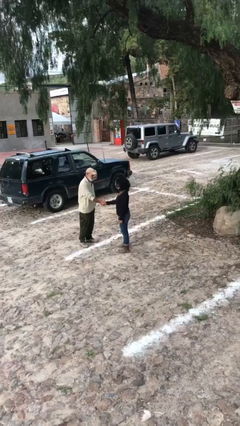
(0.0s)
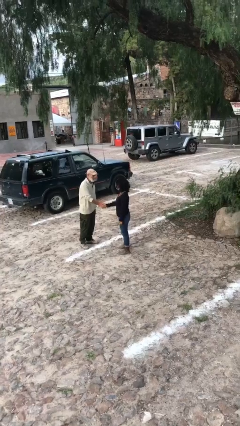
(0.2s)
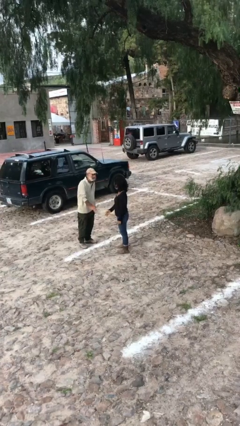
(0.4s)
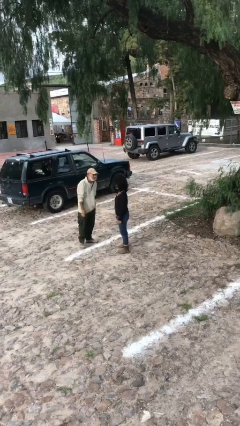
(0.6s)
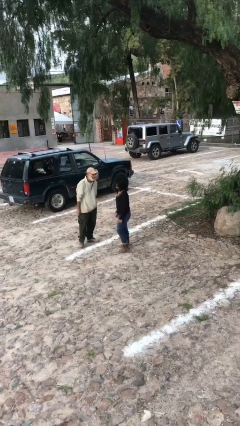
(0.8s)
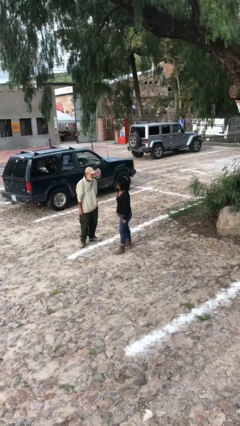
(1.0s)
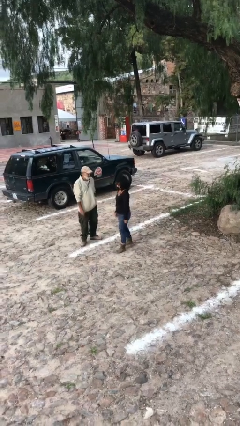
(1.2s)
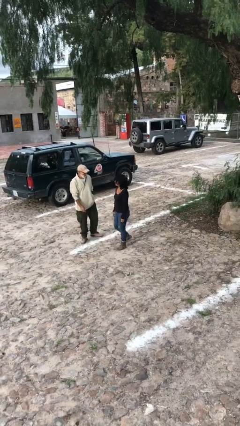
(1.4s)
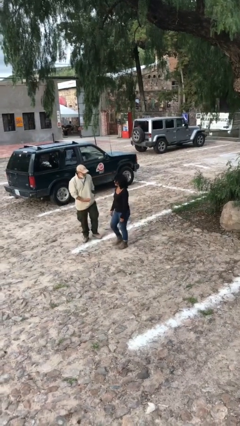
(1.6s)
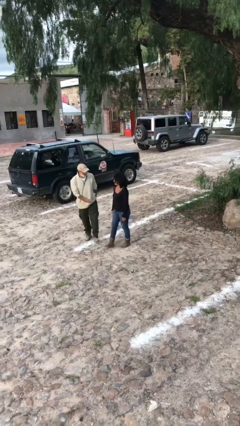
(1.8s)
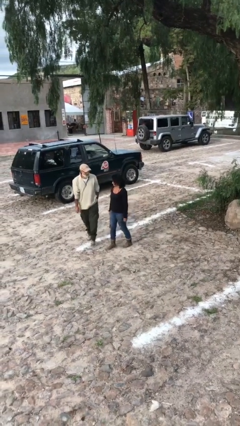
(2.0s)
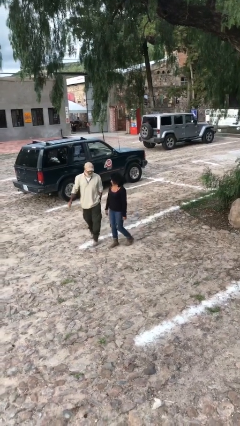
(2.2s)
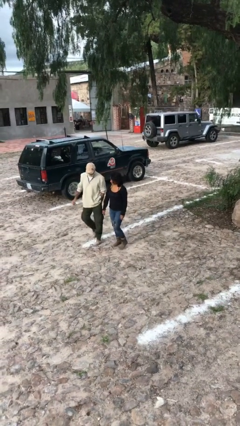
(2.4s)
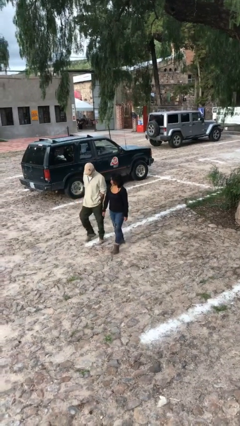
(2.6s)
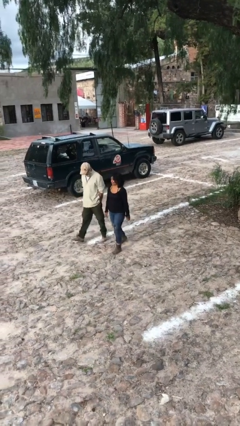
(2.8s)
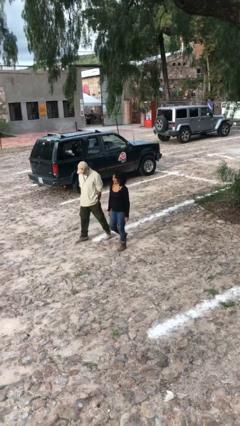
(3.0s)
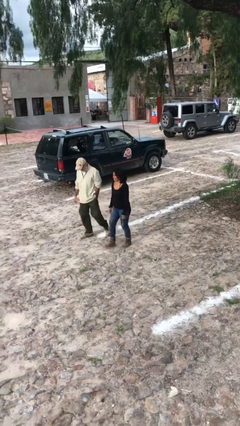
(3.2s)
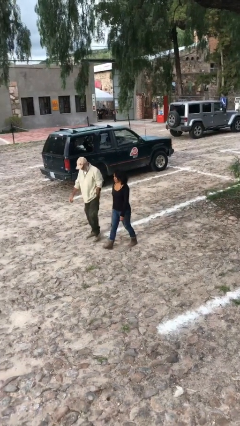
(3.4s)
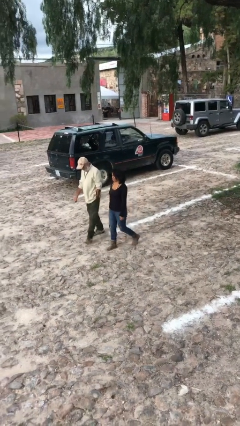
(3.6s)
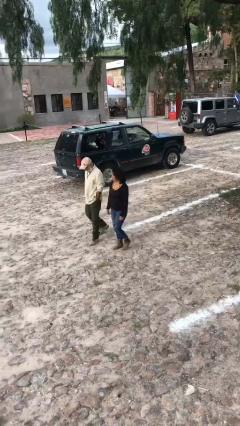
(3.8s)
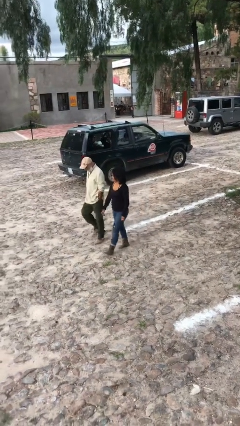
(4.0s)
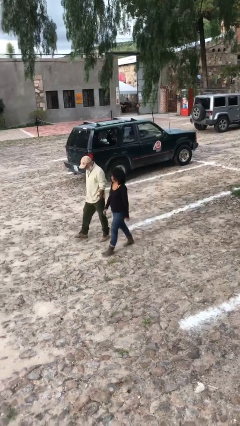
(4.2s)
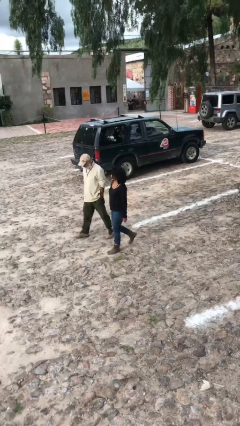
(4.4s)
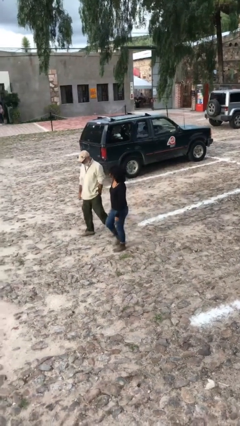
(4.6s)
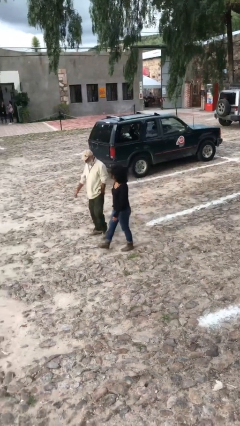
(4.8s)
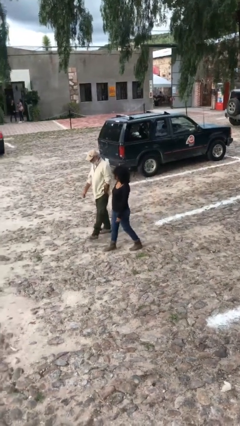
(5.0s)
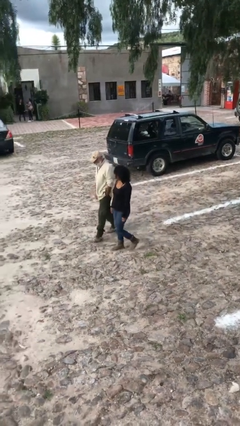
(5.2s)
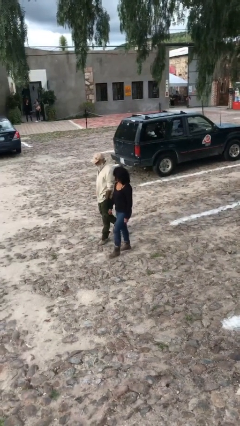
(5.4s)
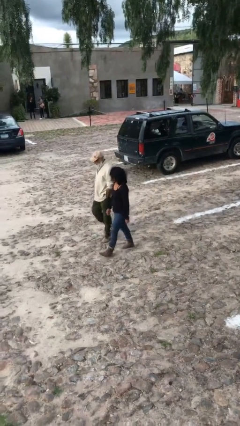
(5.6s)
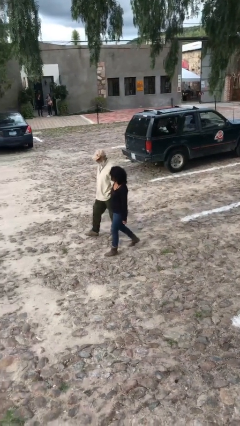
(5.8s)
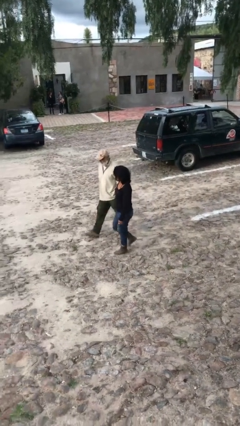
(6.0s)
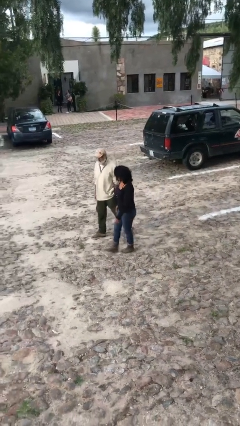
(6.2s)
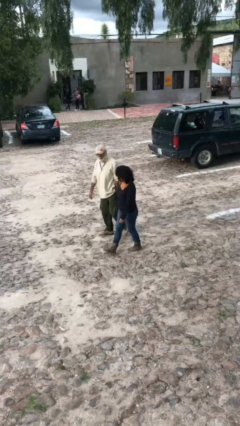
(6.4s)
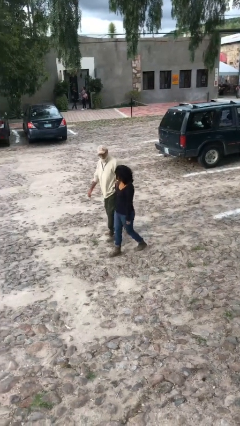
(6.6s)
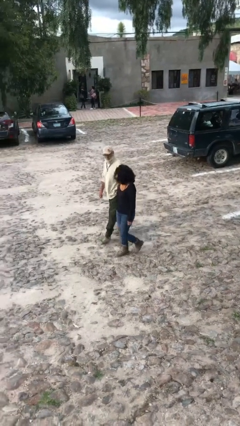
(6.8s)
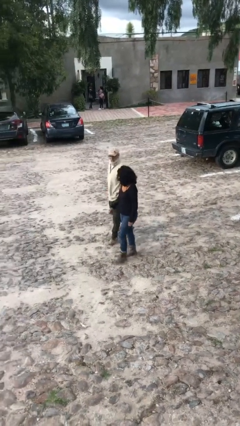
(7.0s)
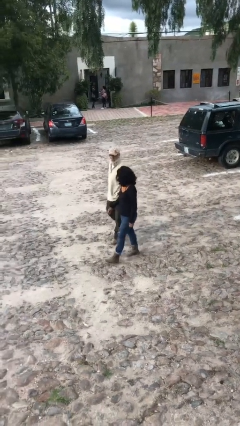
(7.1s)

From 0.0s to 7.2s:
person talks to person

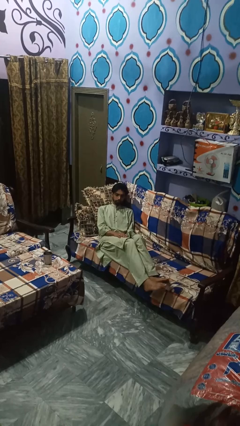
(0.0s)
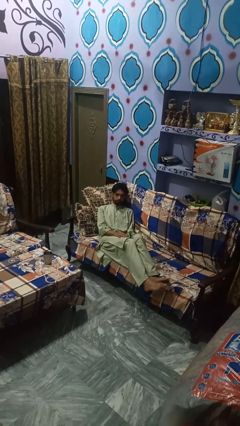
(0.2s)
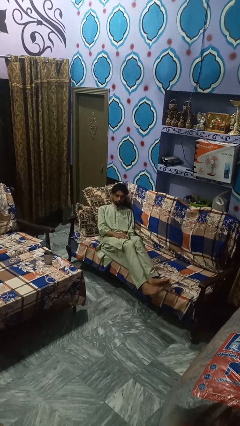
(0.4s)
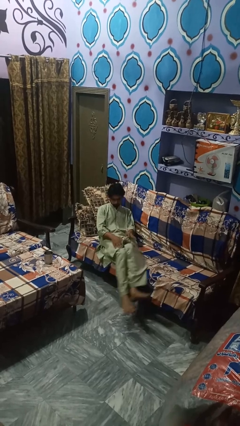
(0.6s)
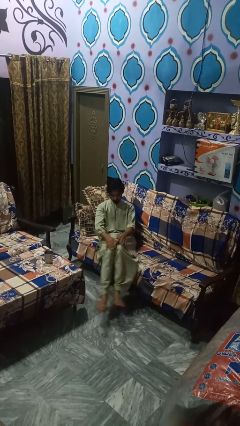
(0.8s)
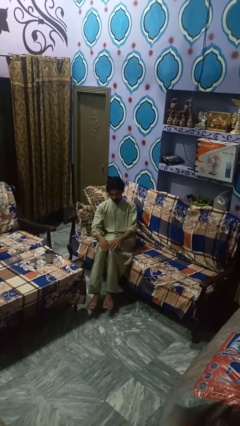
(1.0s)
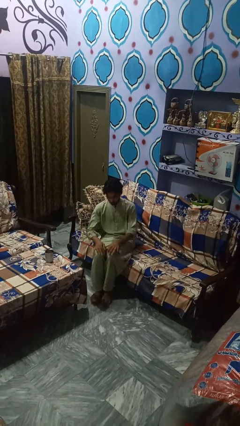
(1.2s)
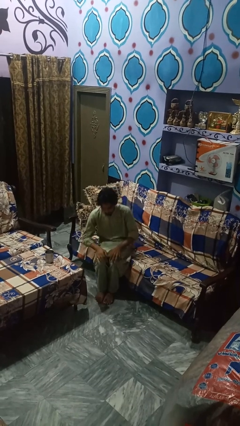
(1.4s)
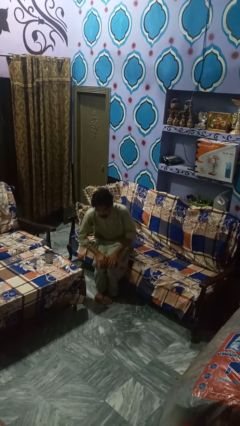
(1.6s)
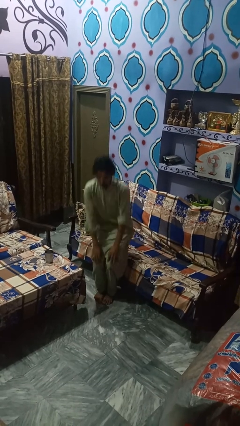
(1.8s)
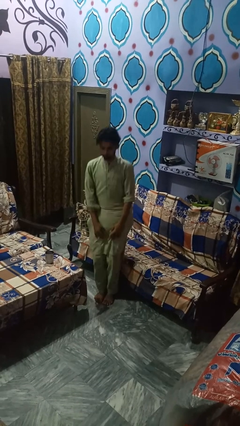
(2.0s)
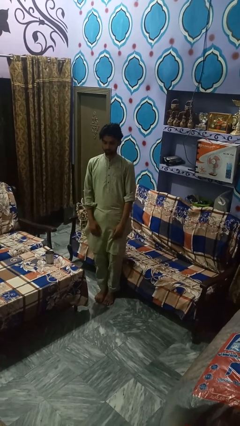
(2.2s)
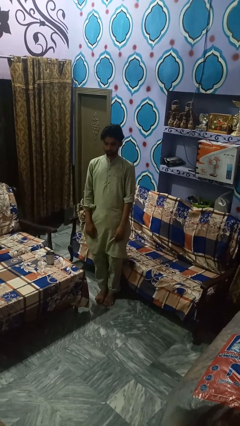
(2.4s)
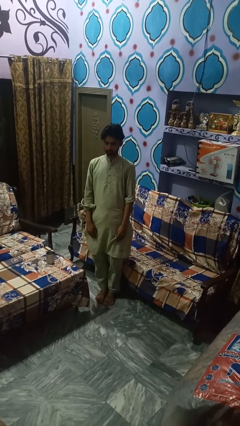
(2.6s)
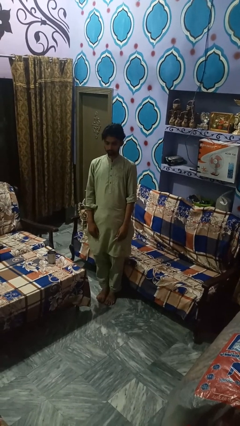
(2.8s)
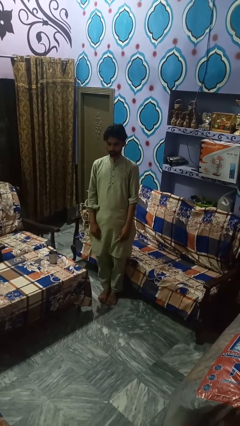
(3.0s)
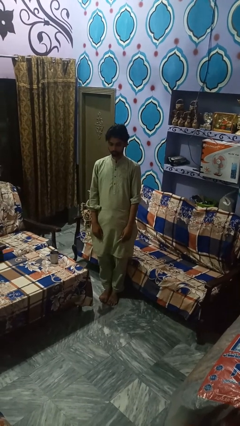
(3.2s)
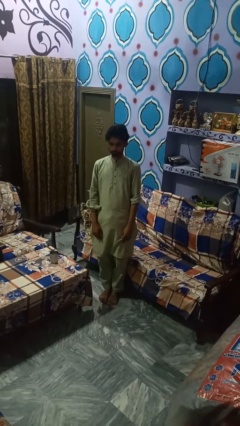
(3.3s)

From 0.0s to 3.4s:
person stands up

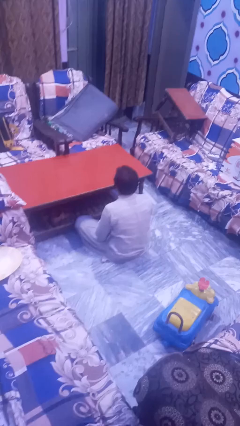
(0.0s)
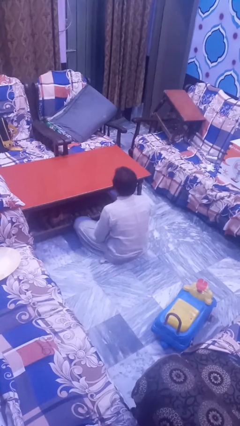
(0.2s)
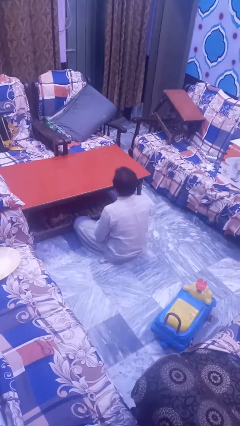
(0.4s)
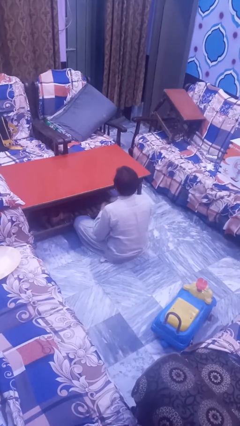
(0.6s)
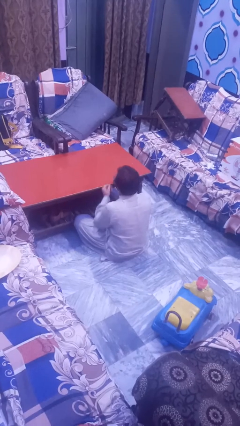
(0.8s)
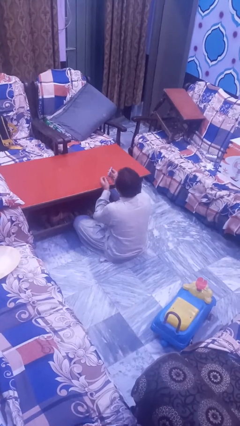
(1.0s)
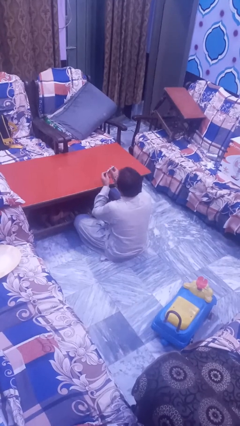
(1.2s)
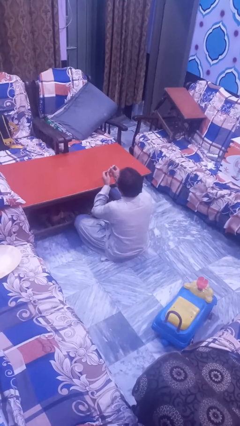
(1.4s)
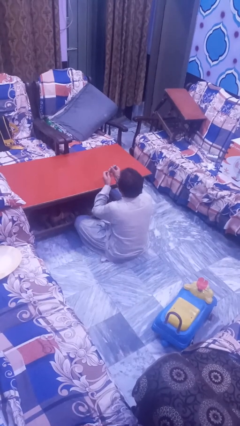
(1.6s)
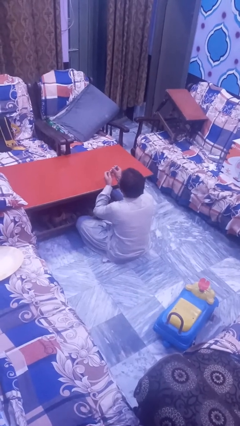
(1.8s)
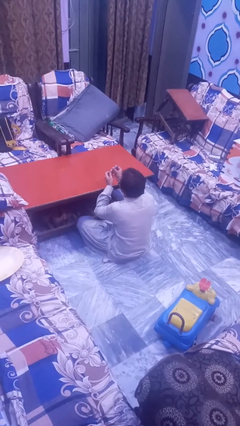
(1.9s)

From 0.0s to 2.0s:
person files fingernails

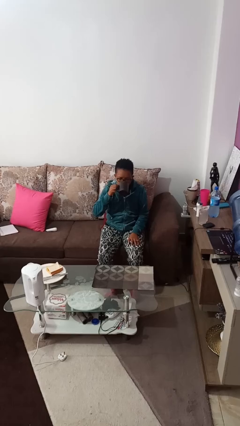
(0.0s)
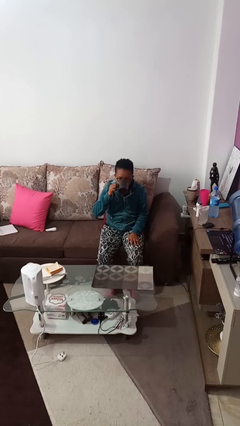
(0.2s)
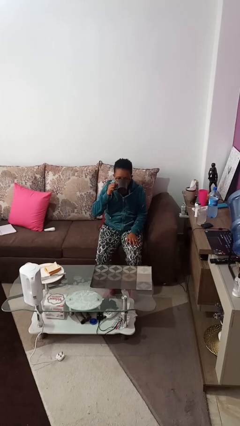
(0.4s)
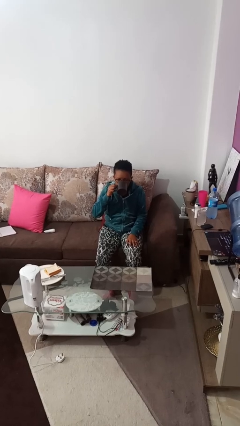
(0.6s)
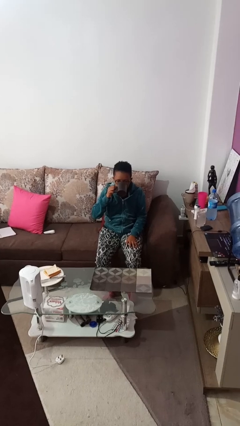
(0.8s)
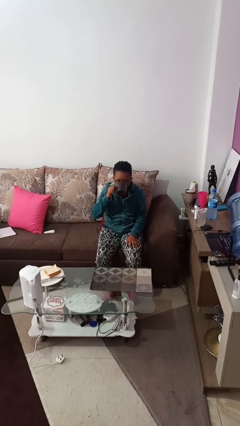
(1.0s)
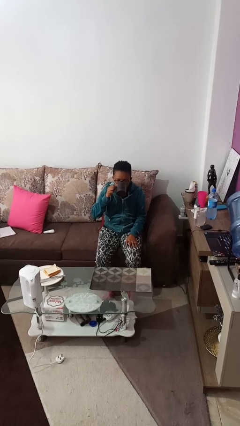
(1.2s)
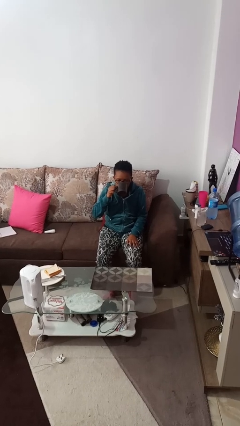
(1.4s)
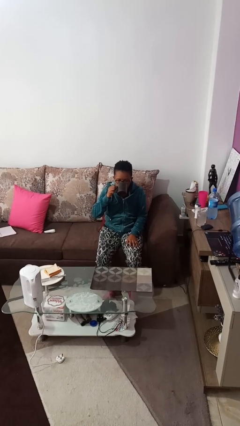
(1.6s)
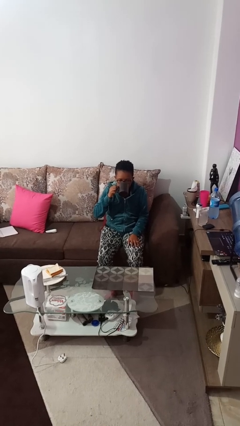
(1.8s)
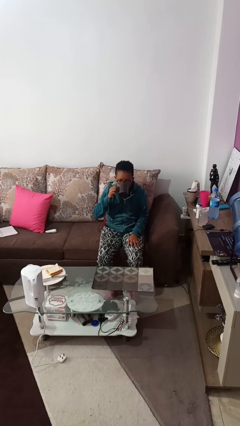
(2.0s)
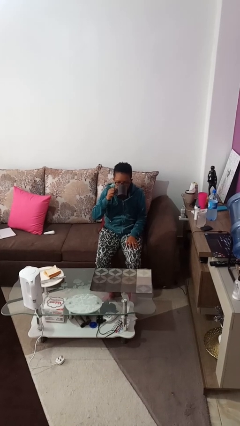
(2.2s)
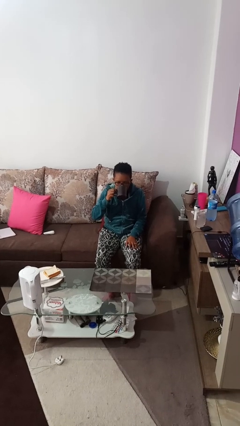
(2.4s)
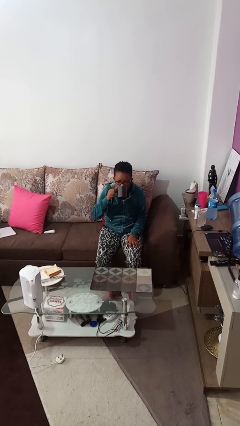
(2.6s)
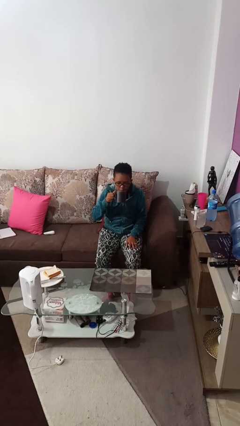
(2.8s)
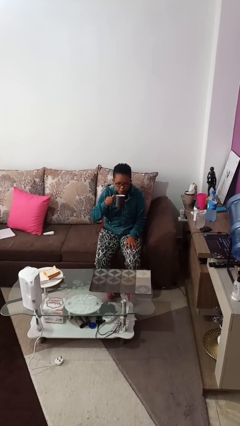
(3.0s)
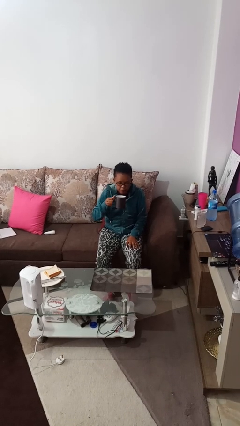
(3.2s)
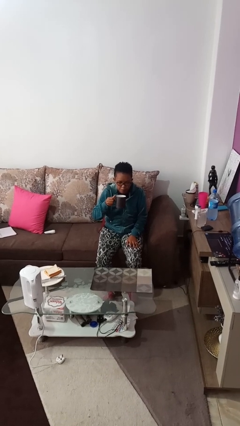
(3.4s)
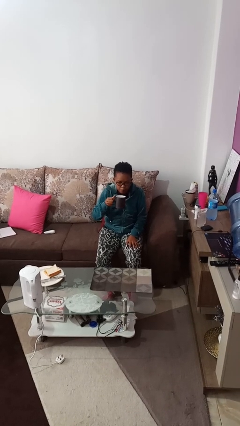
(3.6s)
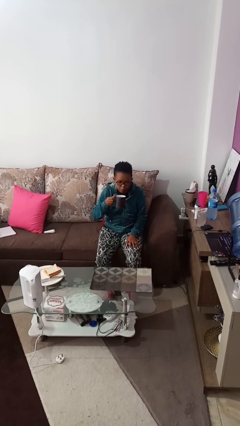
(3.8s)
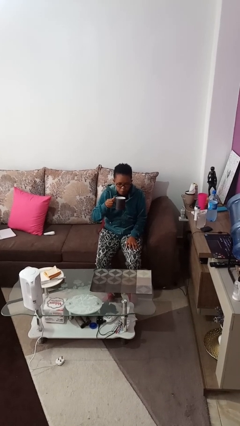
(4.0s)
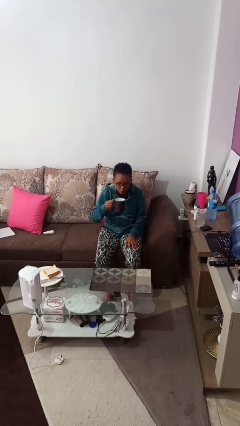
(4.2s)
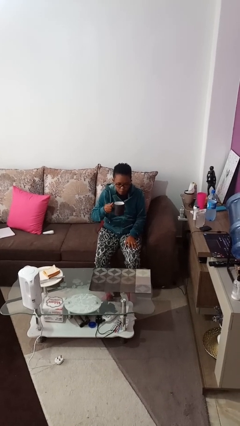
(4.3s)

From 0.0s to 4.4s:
person drinks from mug

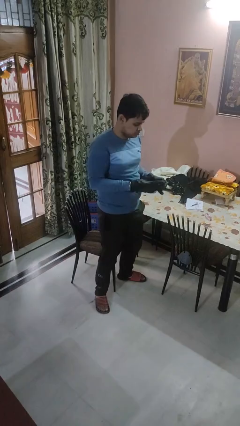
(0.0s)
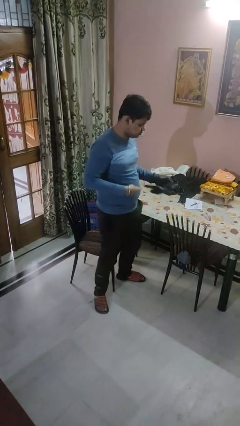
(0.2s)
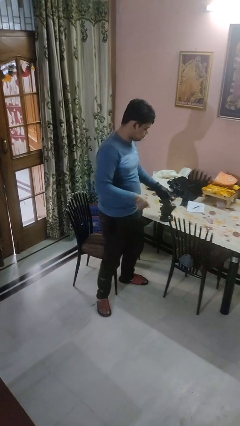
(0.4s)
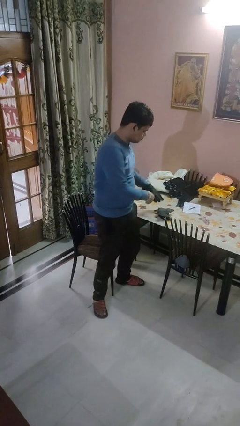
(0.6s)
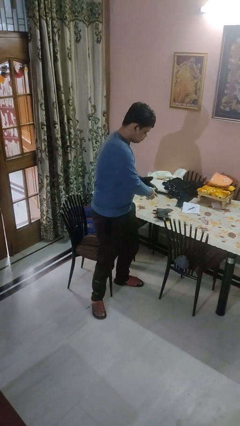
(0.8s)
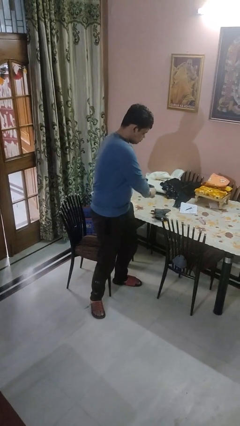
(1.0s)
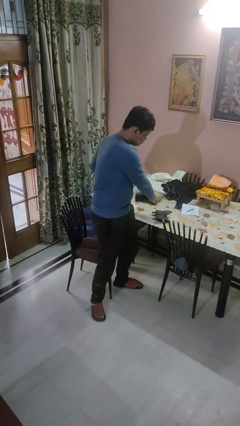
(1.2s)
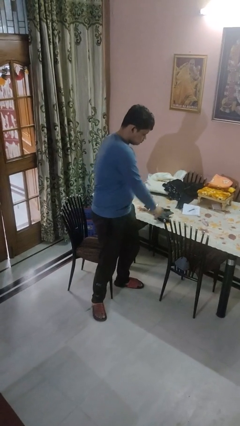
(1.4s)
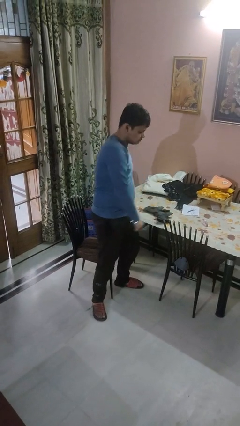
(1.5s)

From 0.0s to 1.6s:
person takes off gloves
